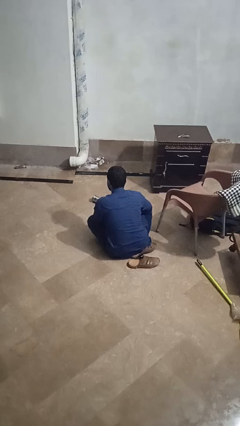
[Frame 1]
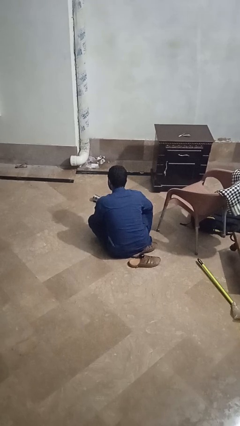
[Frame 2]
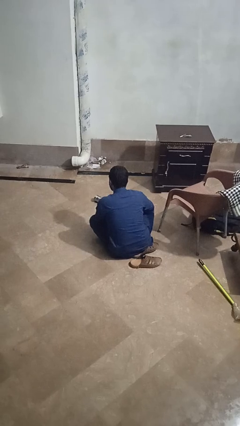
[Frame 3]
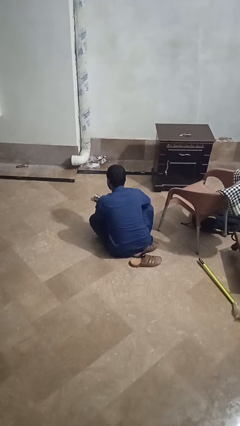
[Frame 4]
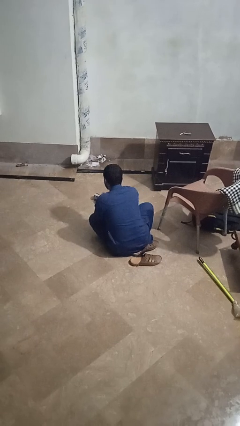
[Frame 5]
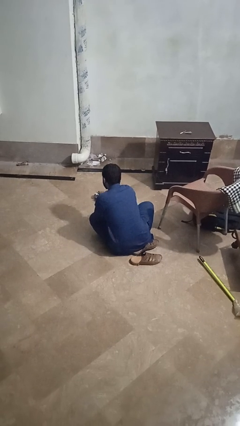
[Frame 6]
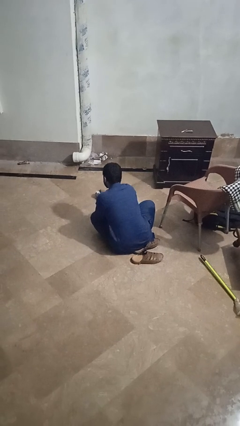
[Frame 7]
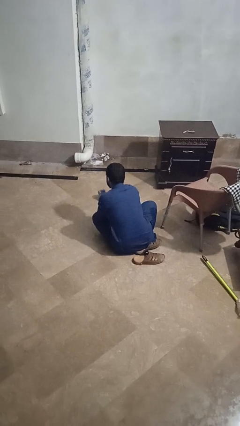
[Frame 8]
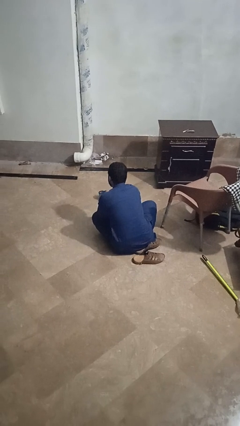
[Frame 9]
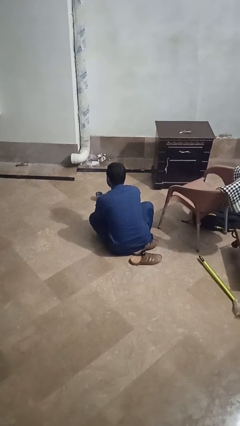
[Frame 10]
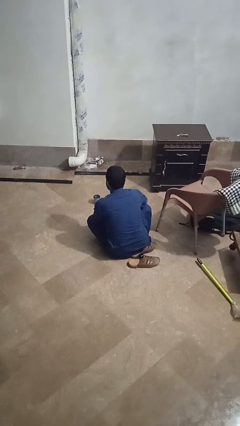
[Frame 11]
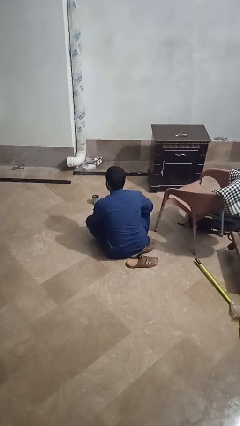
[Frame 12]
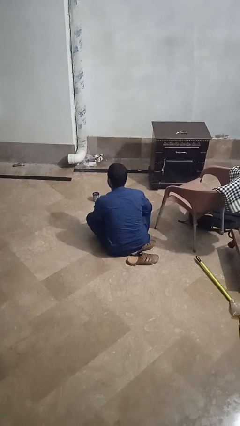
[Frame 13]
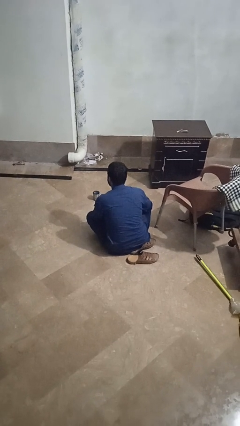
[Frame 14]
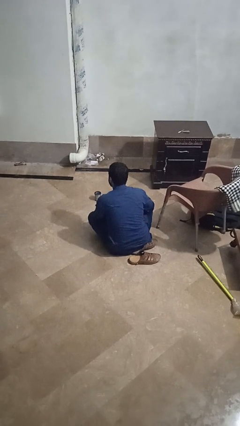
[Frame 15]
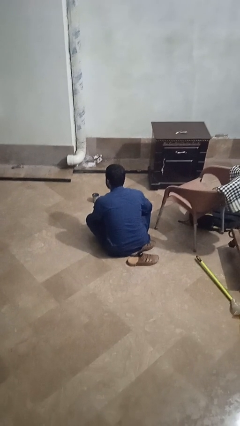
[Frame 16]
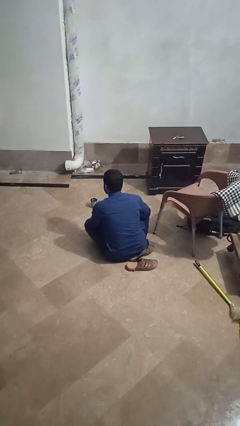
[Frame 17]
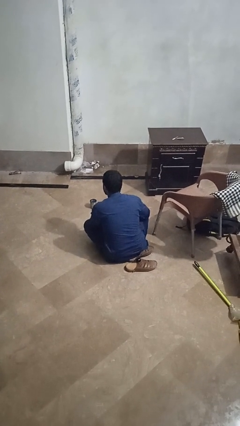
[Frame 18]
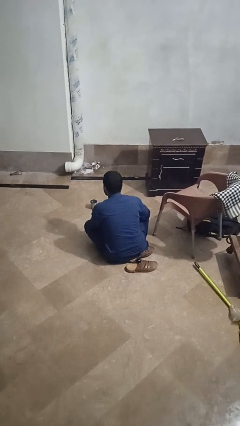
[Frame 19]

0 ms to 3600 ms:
person sets upright glass

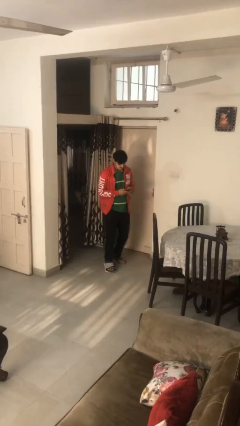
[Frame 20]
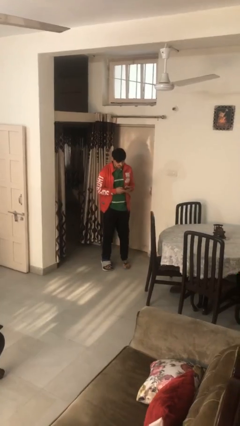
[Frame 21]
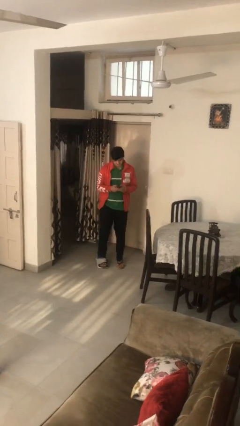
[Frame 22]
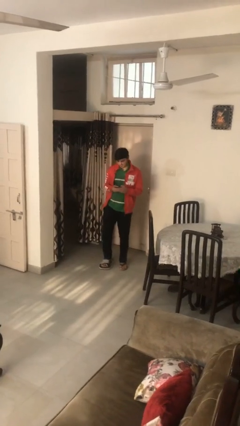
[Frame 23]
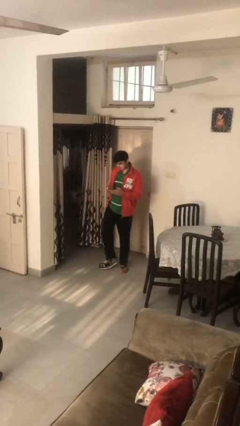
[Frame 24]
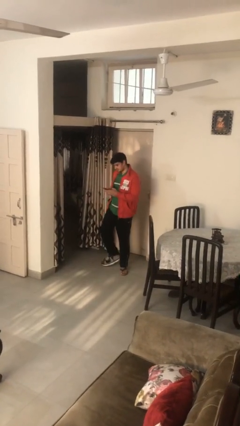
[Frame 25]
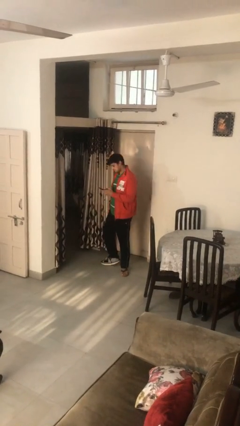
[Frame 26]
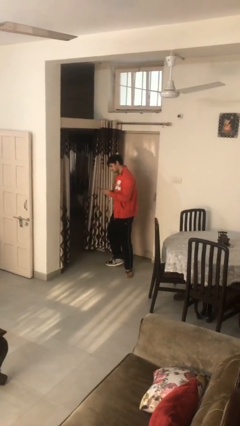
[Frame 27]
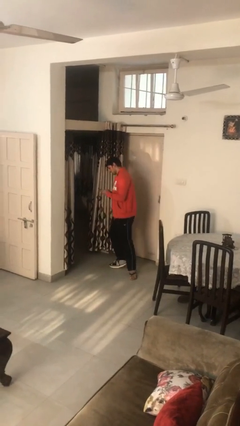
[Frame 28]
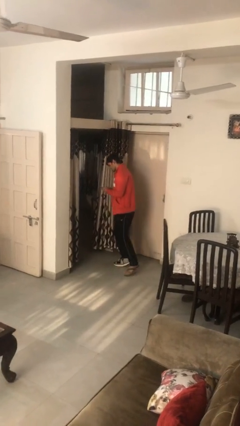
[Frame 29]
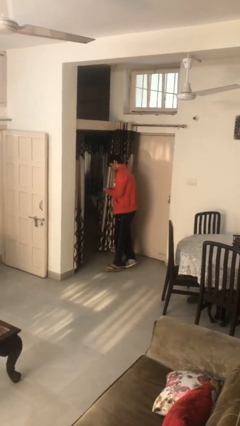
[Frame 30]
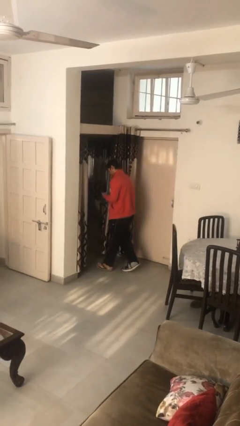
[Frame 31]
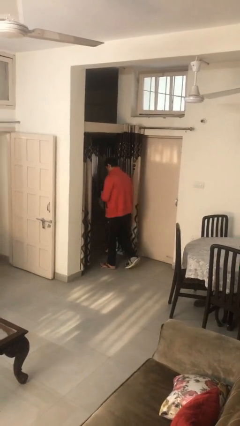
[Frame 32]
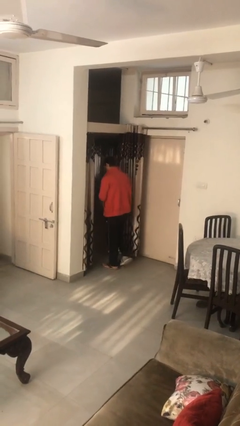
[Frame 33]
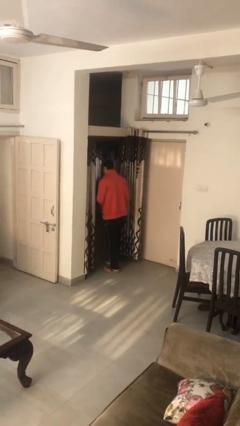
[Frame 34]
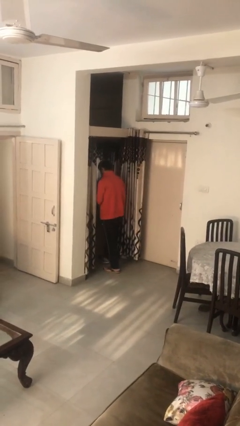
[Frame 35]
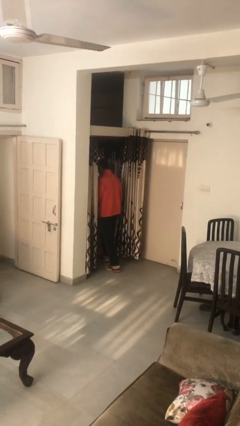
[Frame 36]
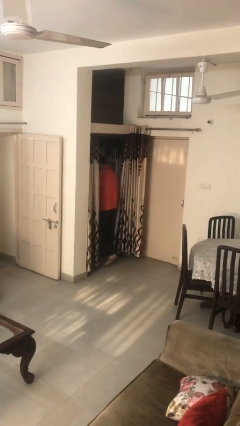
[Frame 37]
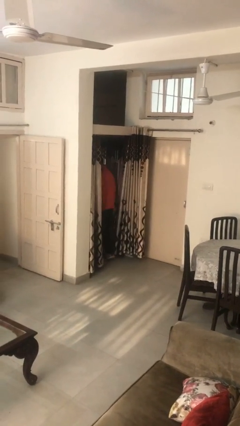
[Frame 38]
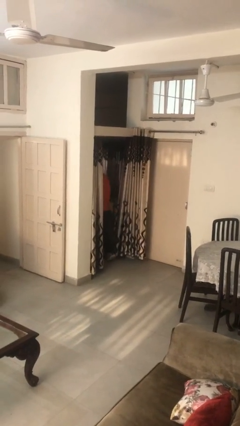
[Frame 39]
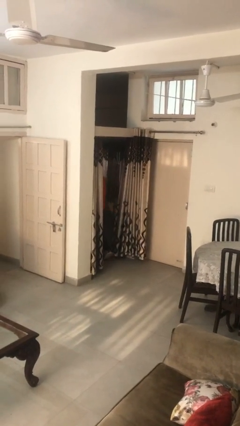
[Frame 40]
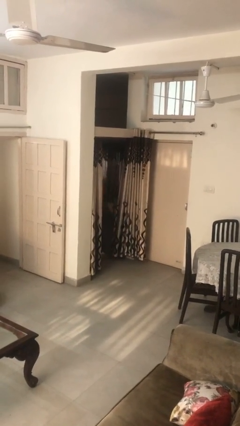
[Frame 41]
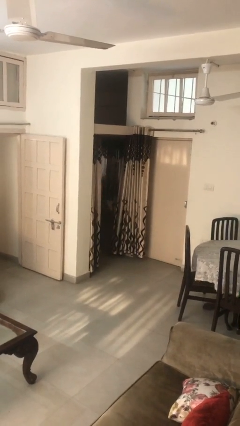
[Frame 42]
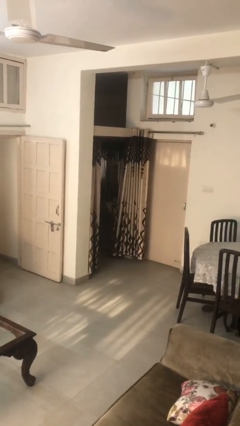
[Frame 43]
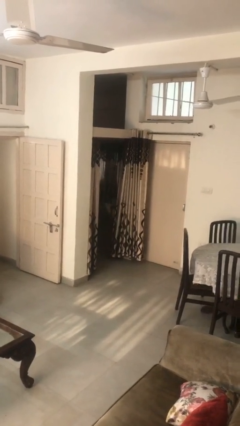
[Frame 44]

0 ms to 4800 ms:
person exits scene through structure

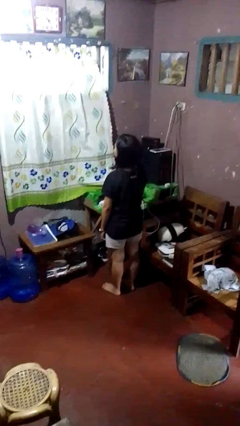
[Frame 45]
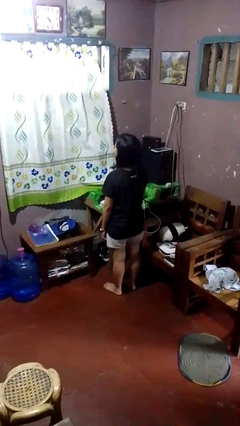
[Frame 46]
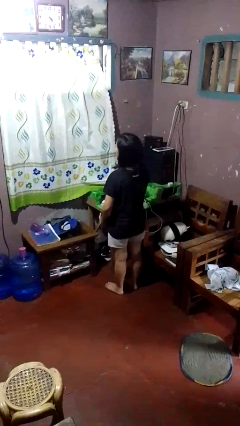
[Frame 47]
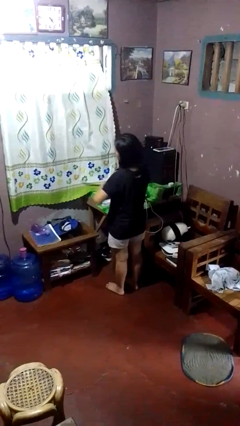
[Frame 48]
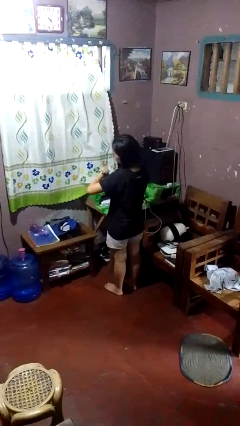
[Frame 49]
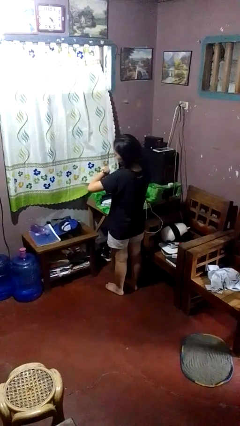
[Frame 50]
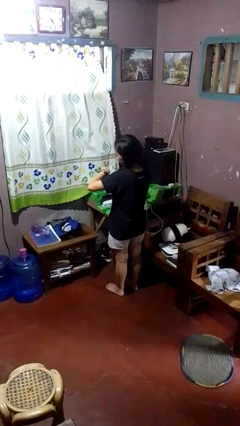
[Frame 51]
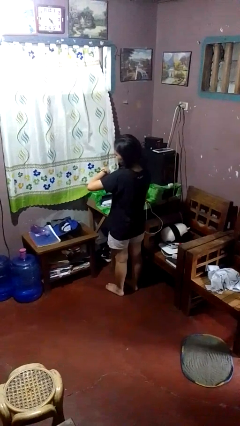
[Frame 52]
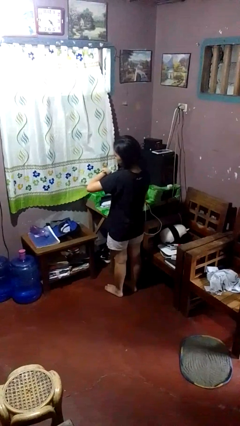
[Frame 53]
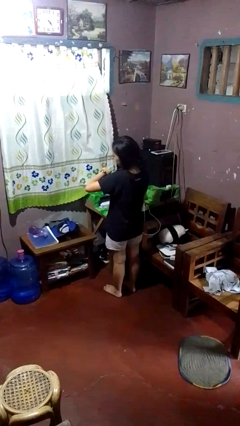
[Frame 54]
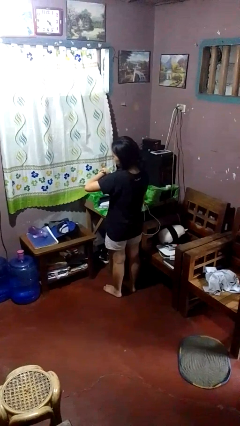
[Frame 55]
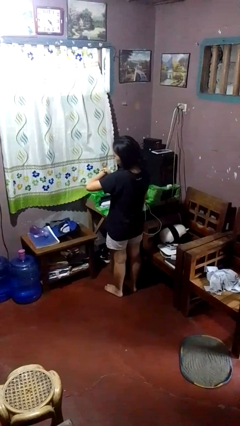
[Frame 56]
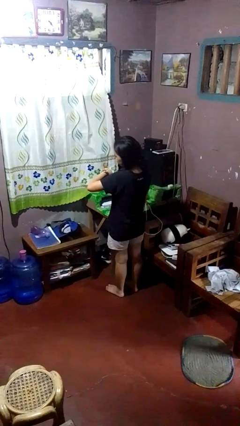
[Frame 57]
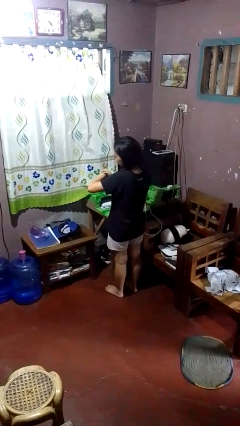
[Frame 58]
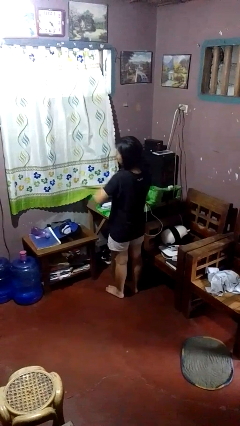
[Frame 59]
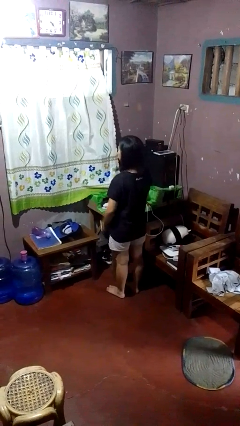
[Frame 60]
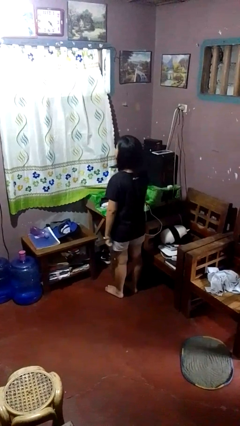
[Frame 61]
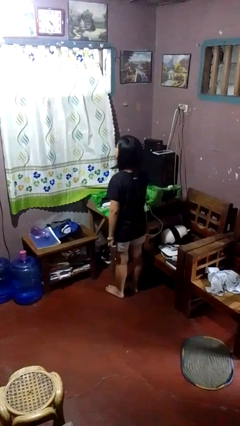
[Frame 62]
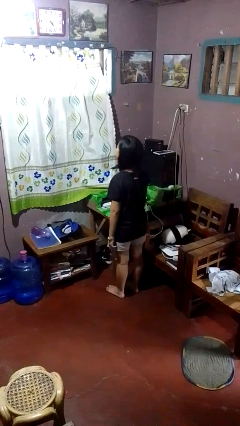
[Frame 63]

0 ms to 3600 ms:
person looks at wristwatch

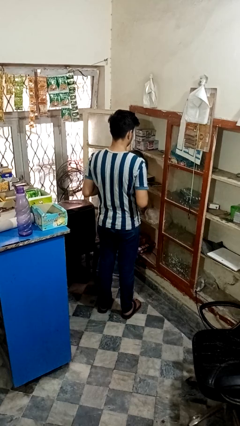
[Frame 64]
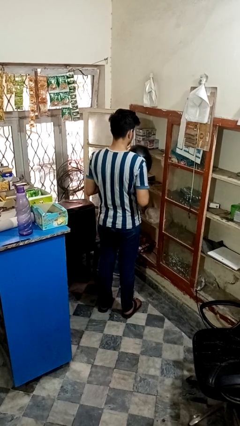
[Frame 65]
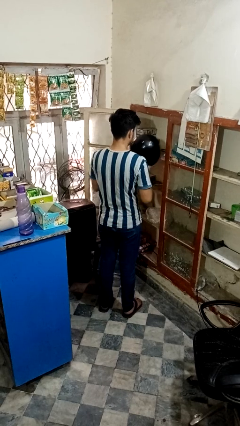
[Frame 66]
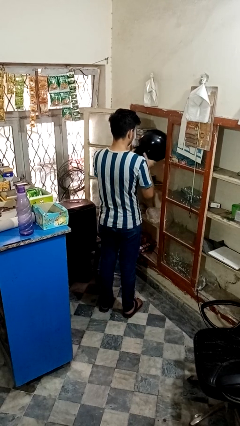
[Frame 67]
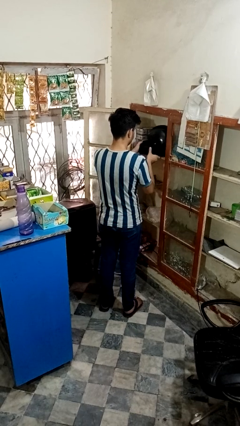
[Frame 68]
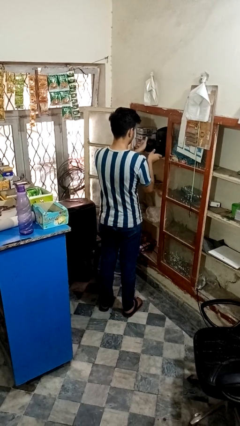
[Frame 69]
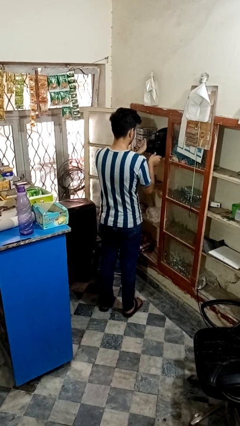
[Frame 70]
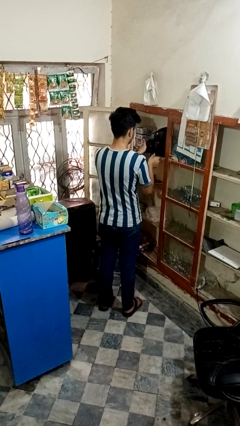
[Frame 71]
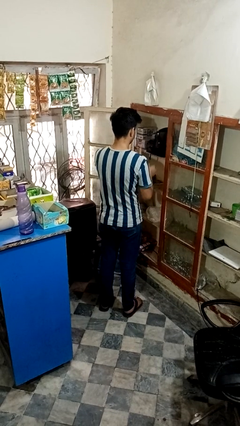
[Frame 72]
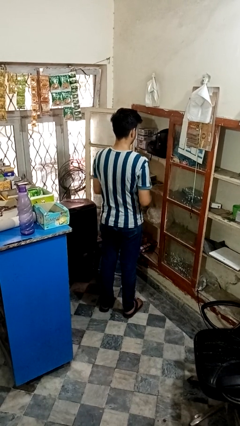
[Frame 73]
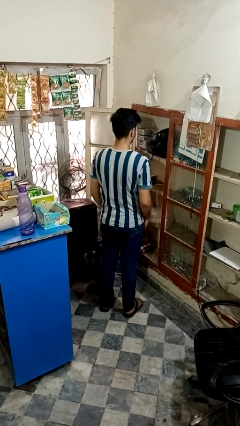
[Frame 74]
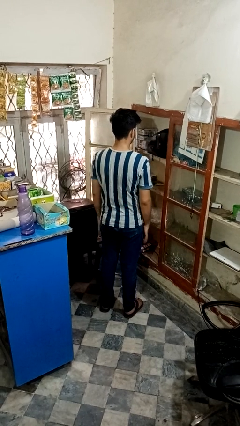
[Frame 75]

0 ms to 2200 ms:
person puts down object on shelf

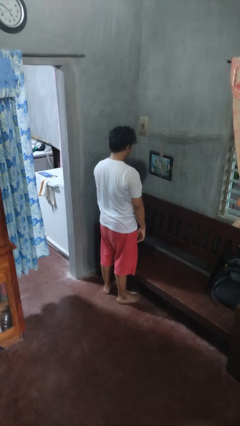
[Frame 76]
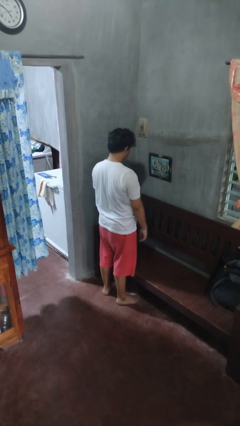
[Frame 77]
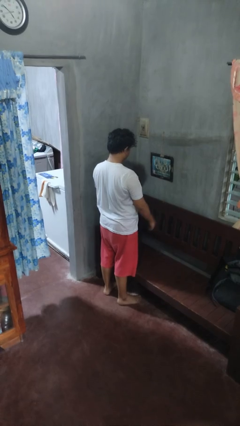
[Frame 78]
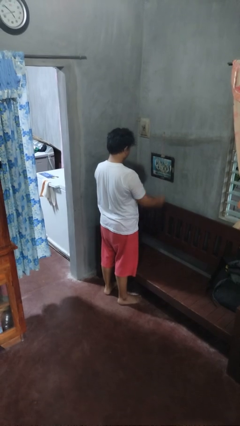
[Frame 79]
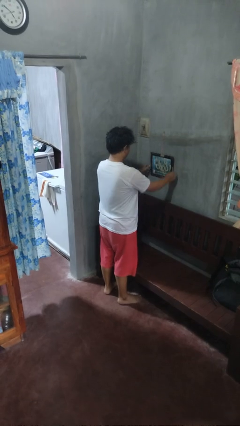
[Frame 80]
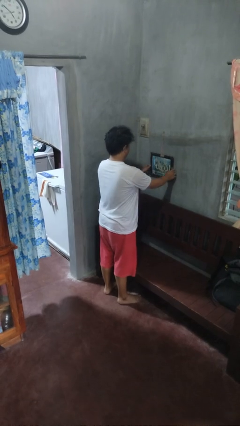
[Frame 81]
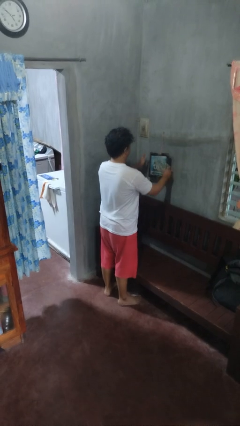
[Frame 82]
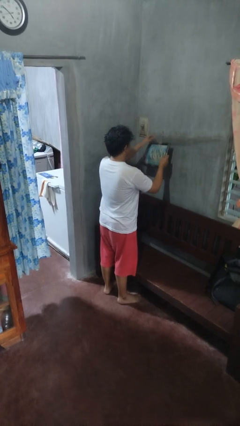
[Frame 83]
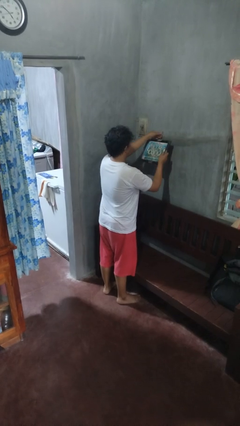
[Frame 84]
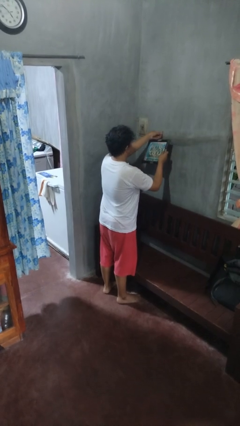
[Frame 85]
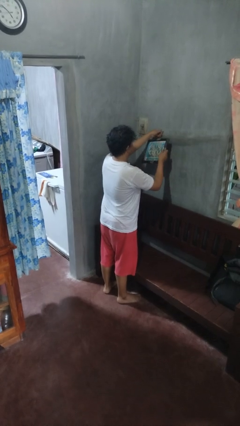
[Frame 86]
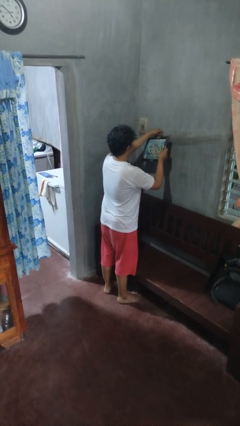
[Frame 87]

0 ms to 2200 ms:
person takes down picture frame

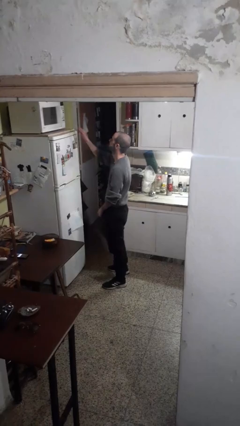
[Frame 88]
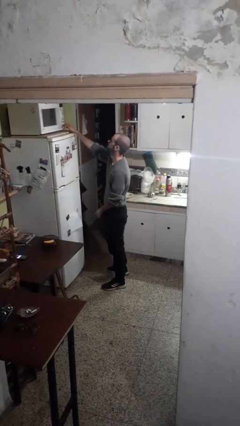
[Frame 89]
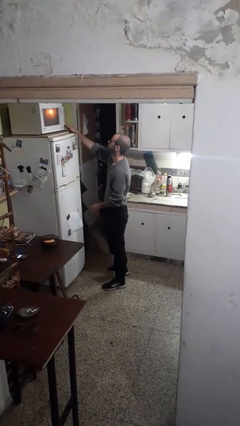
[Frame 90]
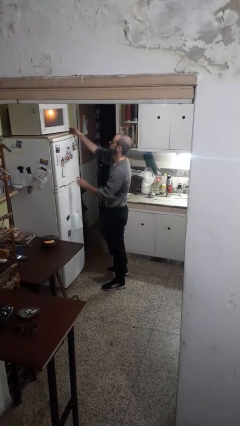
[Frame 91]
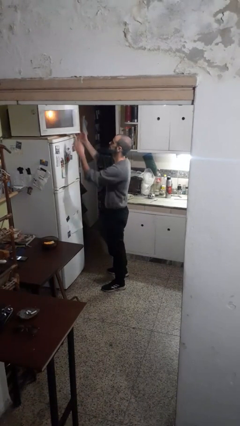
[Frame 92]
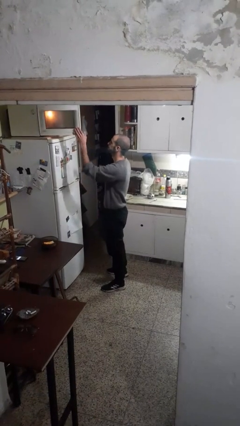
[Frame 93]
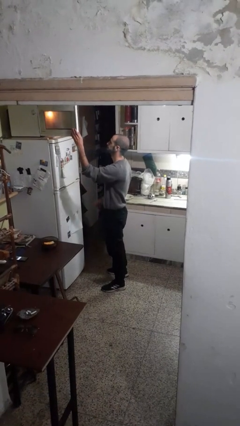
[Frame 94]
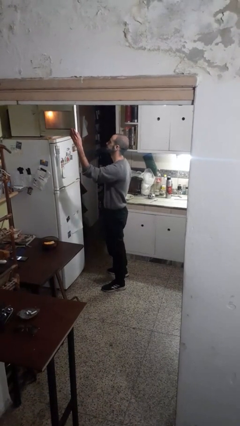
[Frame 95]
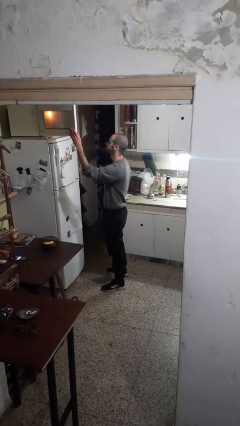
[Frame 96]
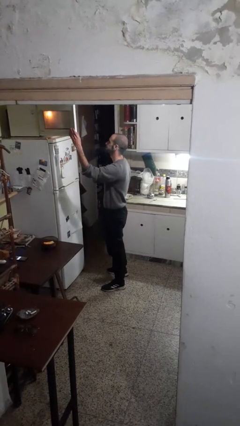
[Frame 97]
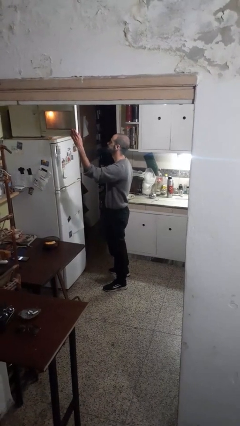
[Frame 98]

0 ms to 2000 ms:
person opens microwave
